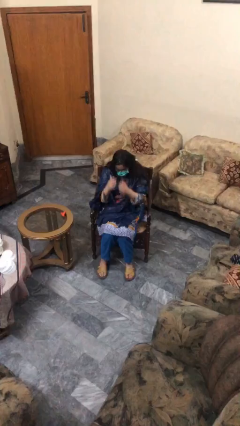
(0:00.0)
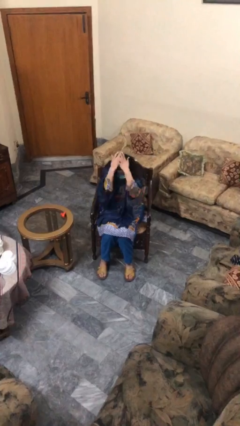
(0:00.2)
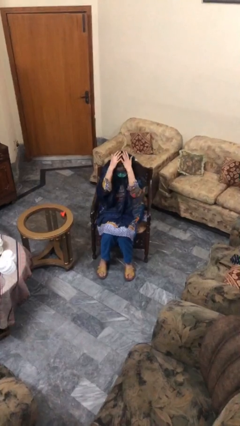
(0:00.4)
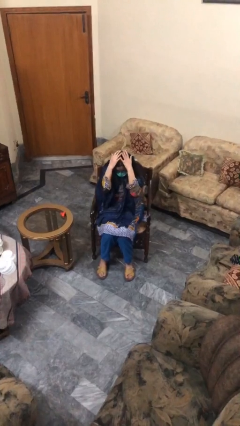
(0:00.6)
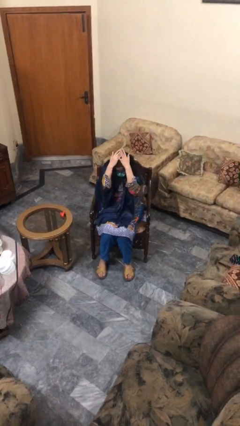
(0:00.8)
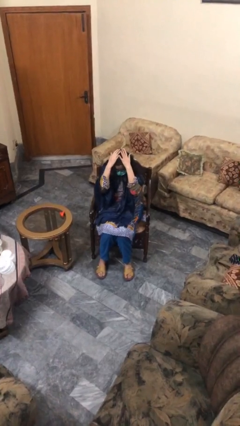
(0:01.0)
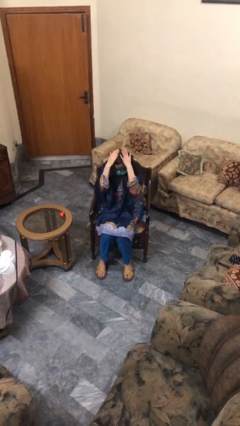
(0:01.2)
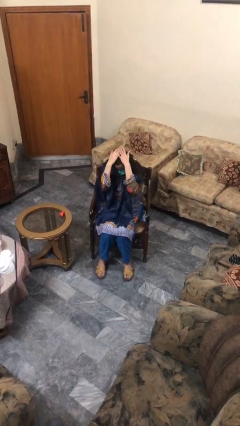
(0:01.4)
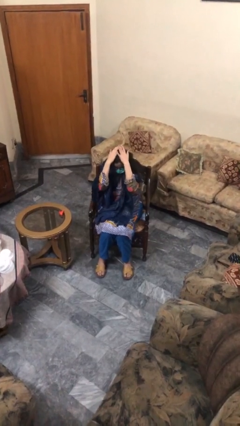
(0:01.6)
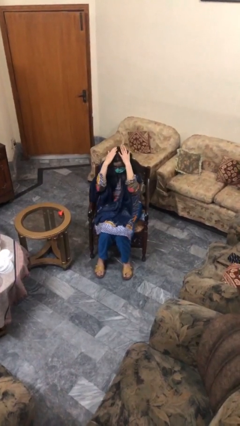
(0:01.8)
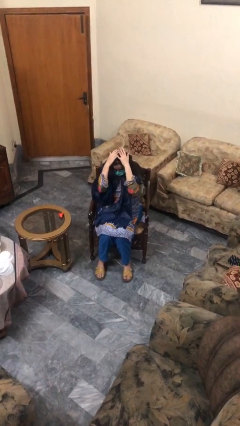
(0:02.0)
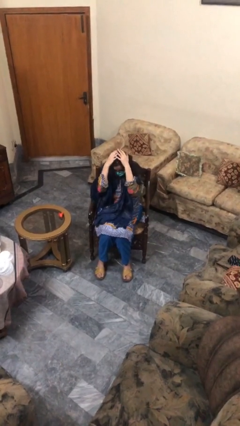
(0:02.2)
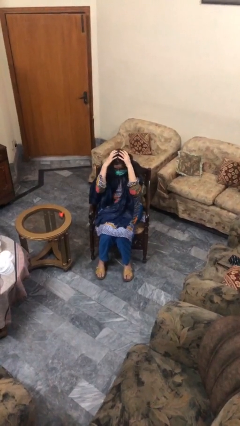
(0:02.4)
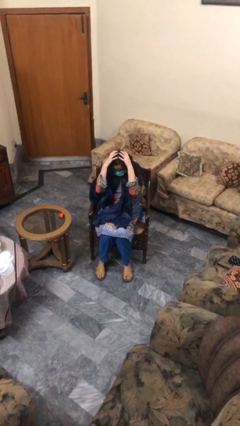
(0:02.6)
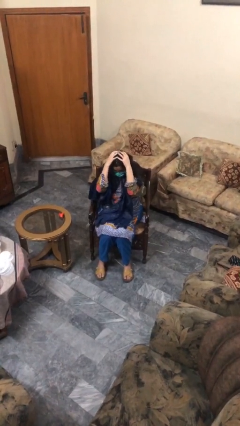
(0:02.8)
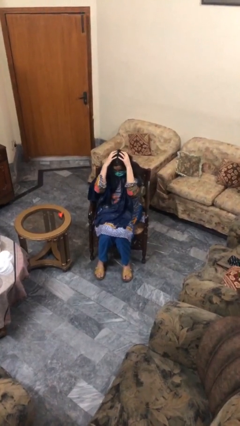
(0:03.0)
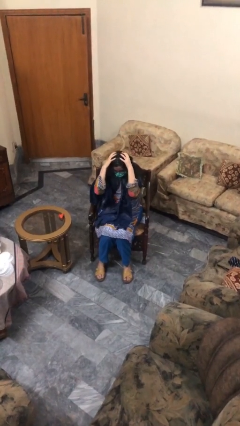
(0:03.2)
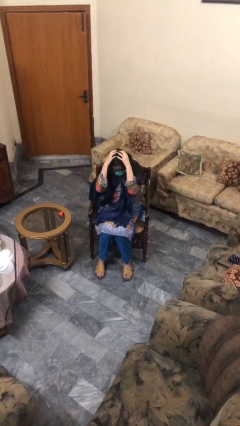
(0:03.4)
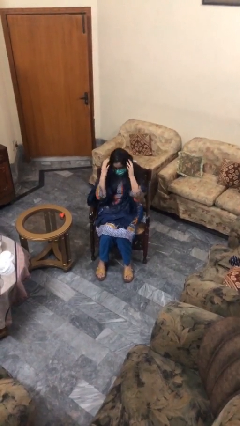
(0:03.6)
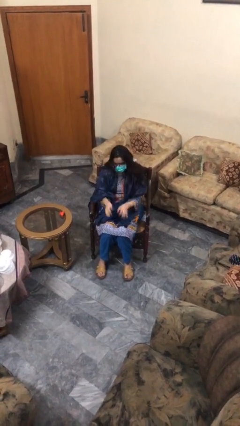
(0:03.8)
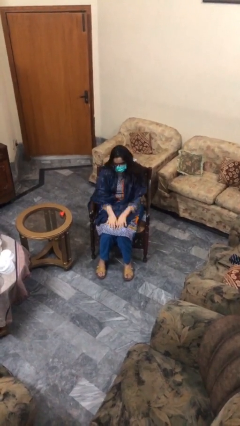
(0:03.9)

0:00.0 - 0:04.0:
person pats head

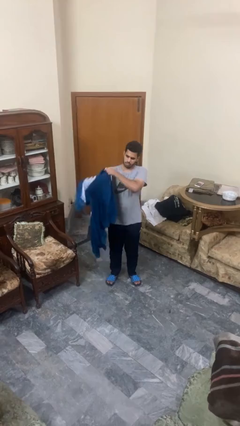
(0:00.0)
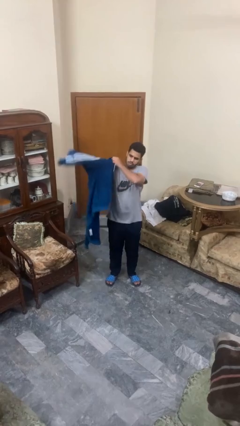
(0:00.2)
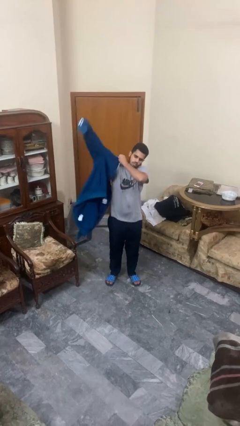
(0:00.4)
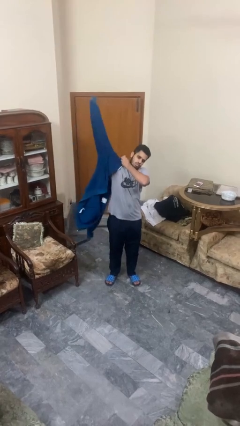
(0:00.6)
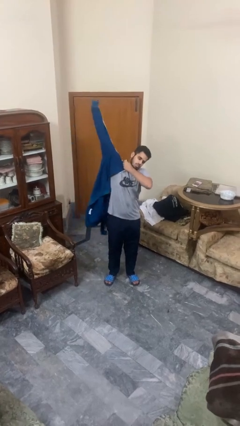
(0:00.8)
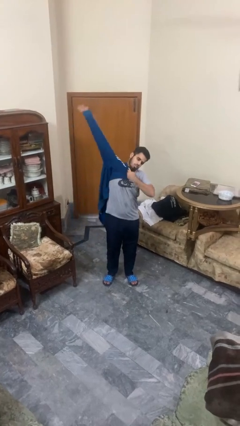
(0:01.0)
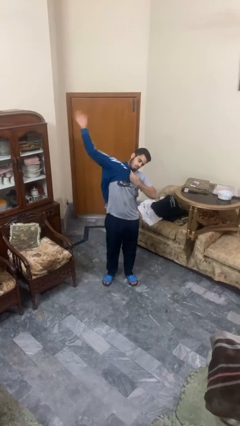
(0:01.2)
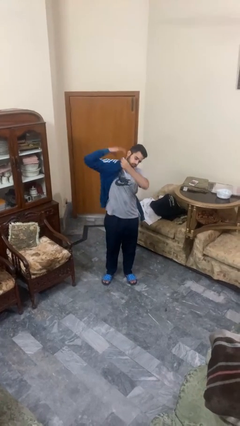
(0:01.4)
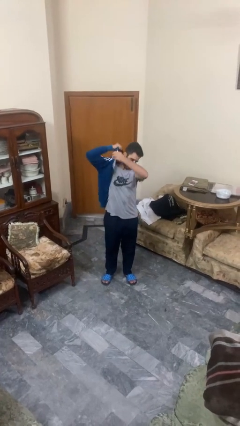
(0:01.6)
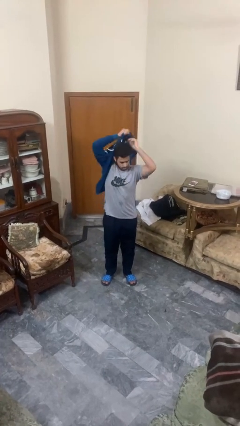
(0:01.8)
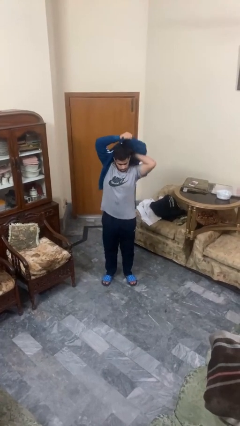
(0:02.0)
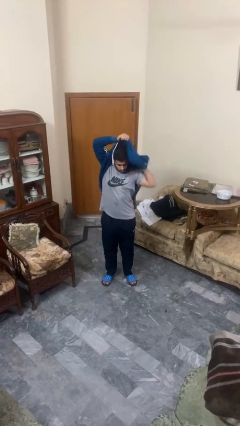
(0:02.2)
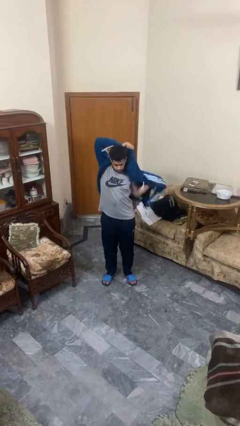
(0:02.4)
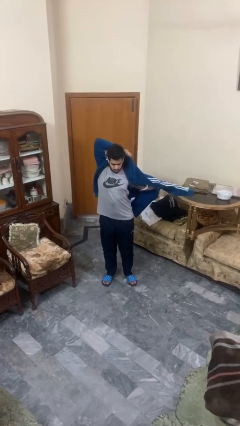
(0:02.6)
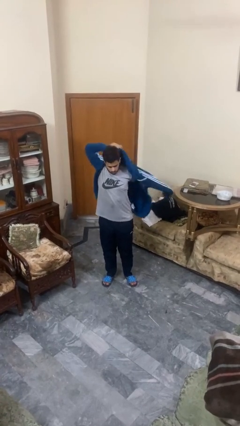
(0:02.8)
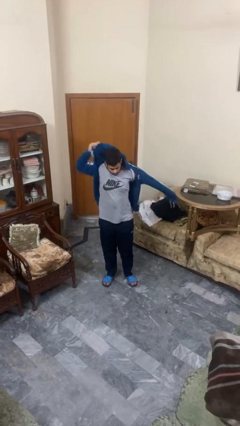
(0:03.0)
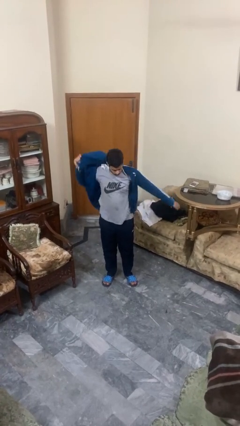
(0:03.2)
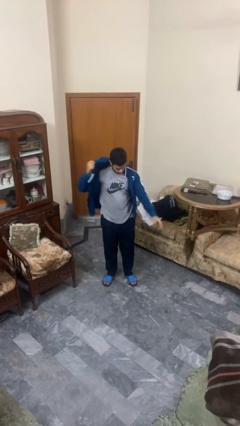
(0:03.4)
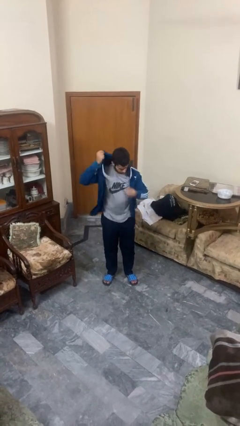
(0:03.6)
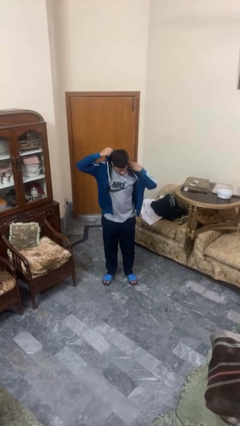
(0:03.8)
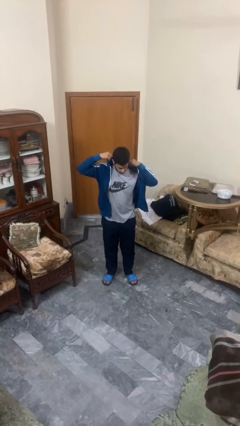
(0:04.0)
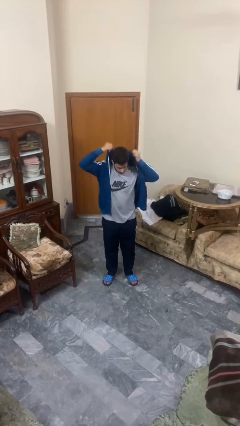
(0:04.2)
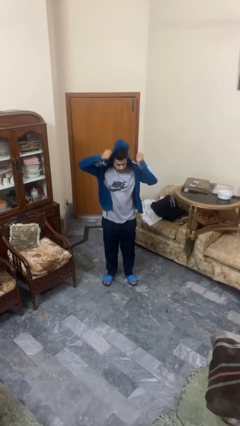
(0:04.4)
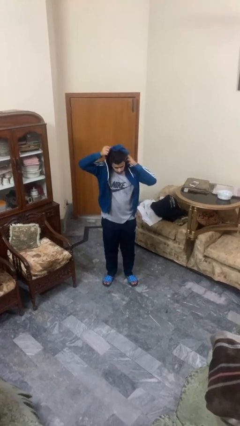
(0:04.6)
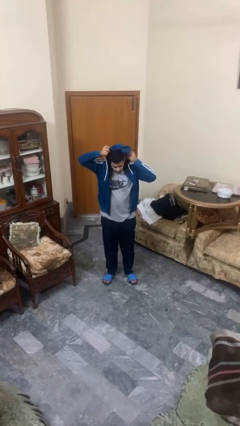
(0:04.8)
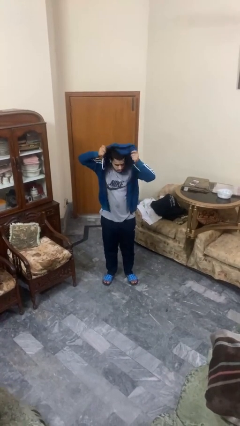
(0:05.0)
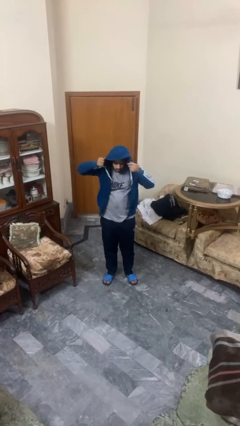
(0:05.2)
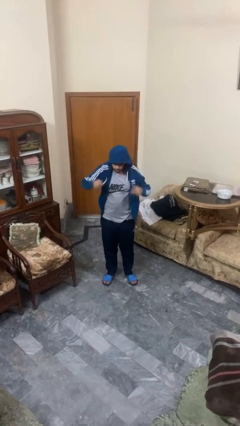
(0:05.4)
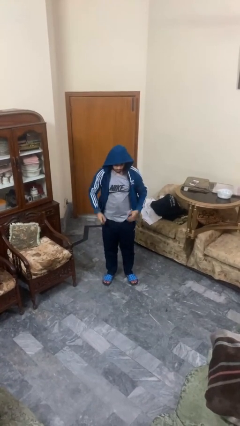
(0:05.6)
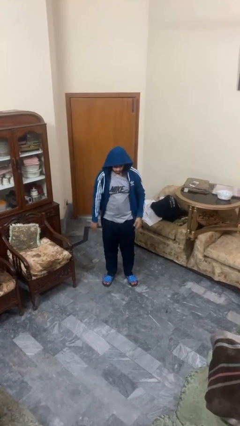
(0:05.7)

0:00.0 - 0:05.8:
person puts on hoodie

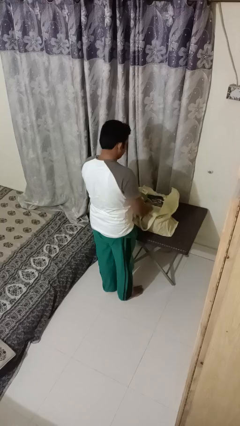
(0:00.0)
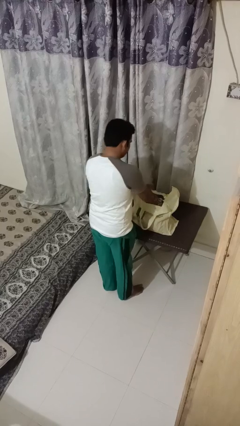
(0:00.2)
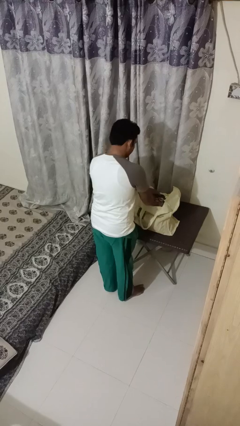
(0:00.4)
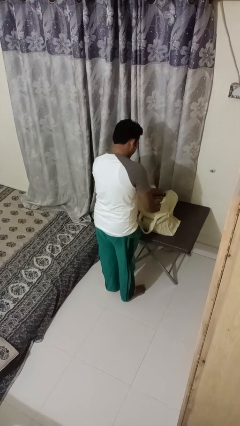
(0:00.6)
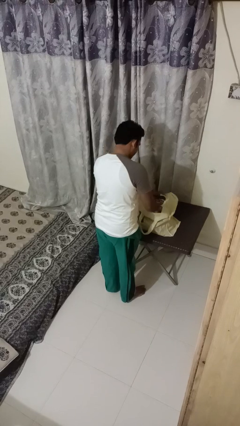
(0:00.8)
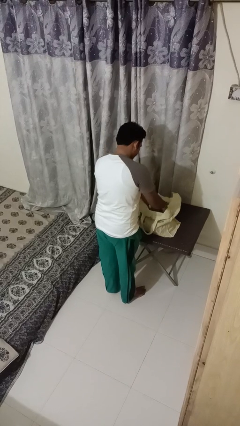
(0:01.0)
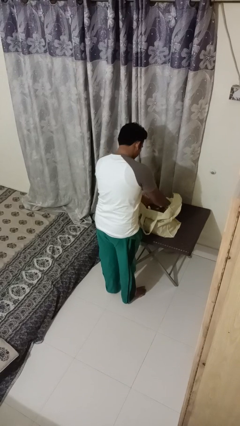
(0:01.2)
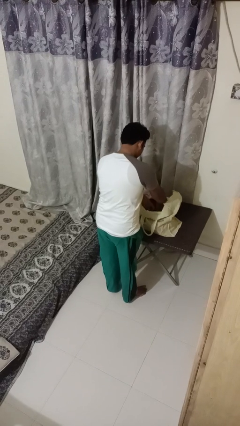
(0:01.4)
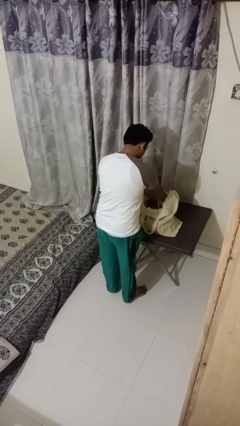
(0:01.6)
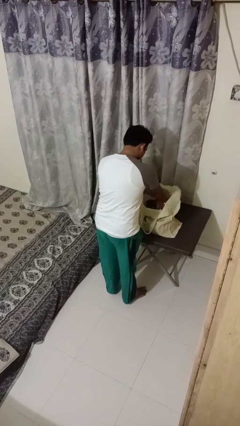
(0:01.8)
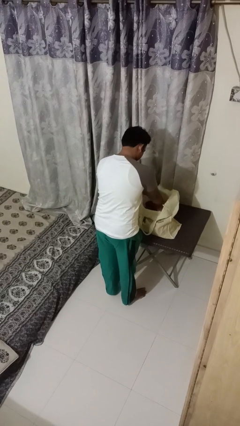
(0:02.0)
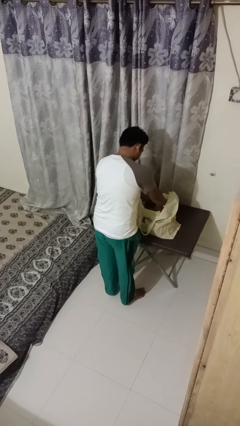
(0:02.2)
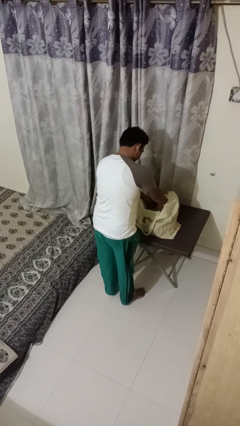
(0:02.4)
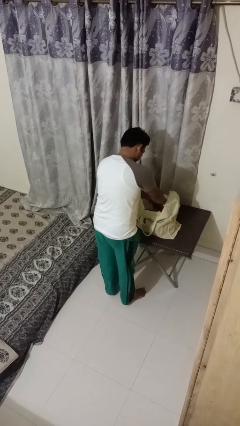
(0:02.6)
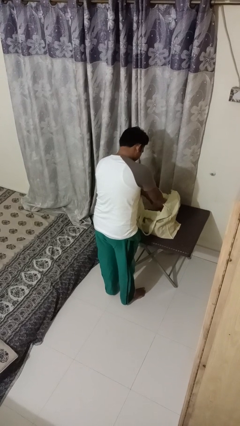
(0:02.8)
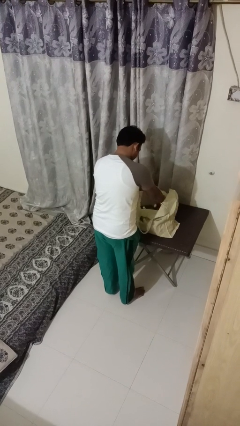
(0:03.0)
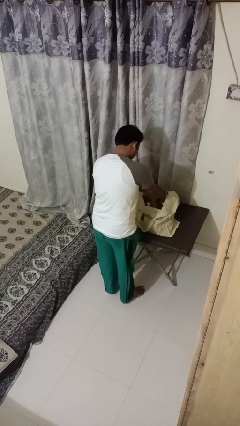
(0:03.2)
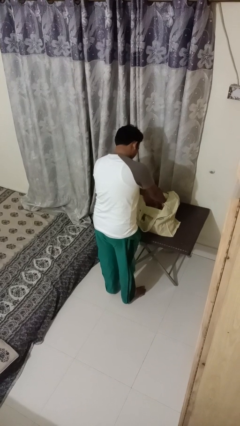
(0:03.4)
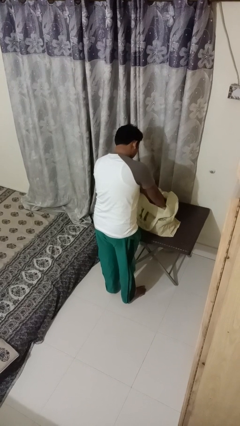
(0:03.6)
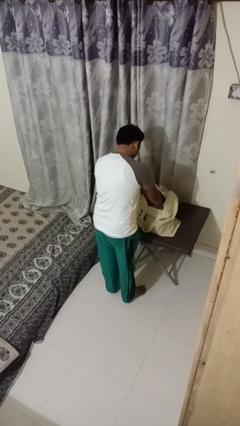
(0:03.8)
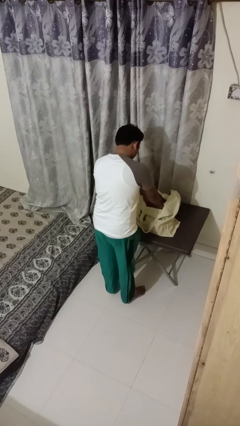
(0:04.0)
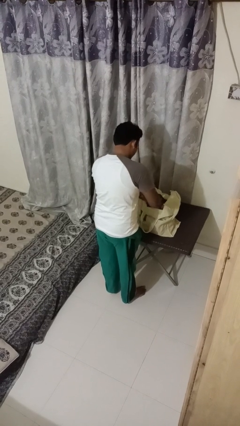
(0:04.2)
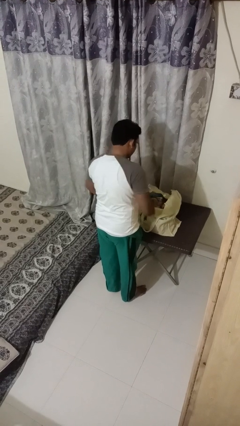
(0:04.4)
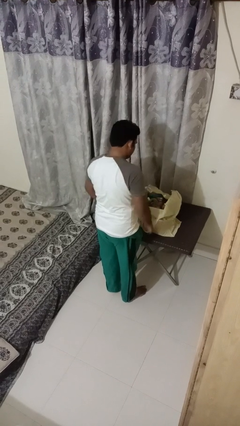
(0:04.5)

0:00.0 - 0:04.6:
person searches in bag

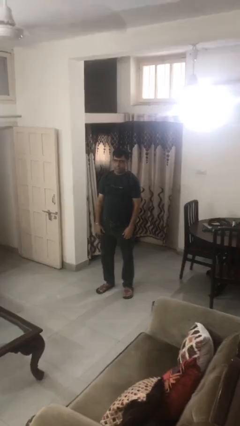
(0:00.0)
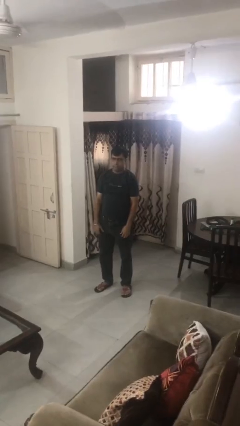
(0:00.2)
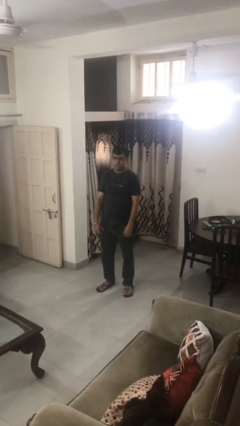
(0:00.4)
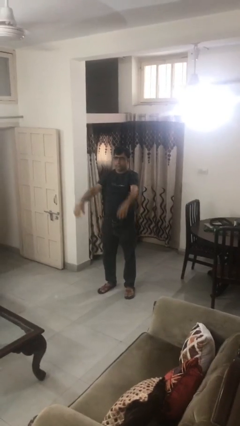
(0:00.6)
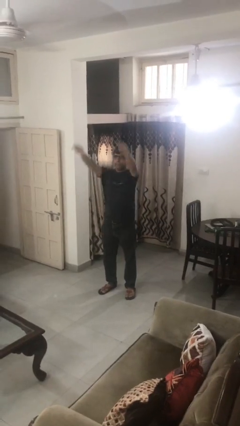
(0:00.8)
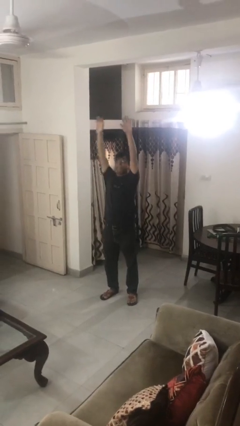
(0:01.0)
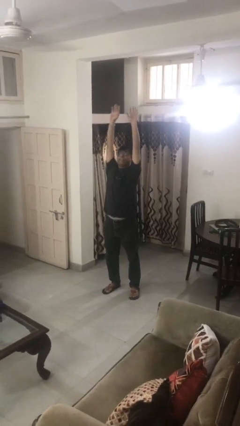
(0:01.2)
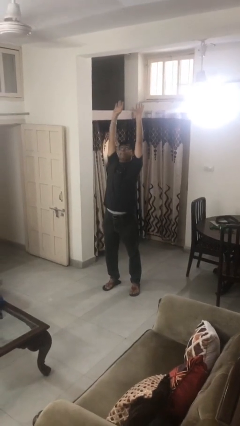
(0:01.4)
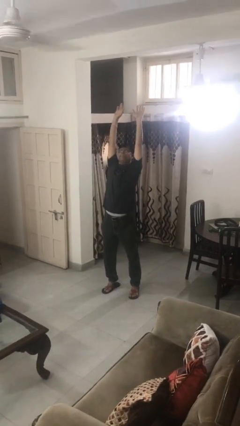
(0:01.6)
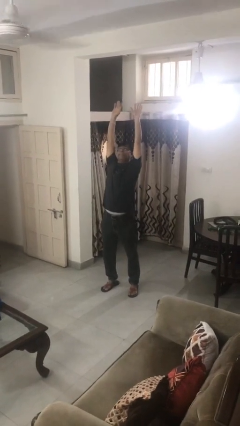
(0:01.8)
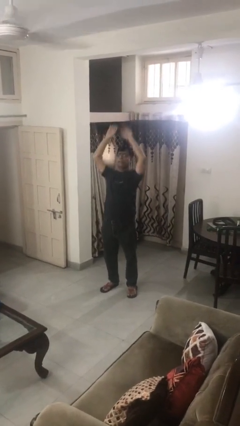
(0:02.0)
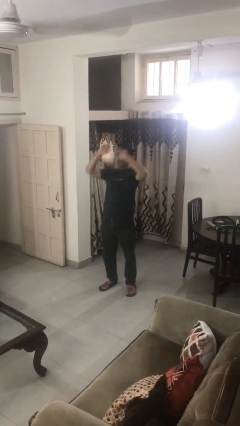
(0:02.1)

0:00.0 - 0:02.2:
person stretches arms over head

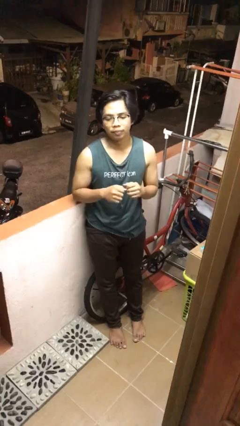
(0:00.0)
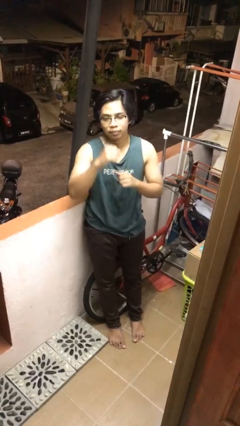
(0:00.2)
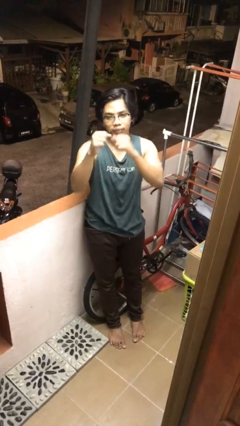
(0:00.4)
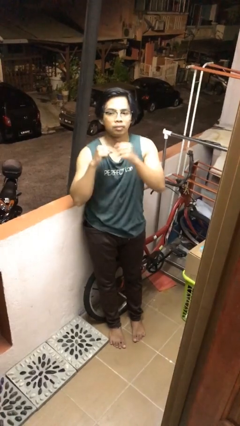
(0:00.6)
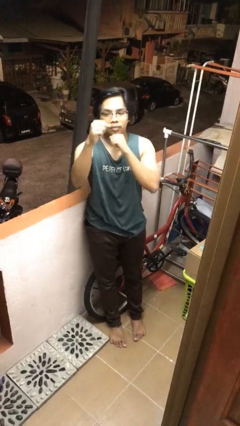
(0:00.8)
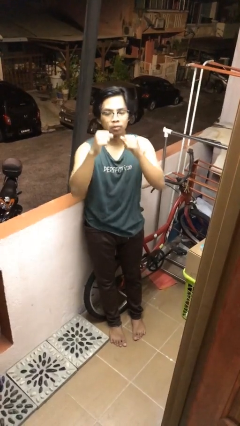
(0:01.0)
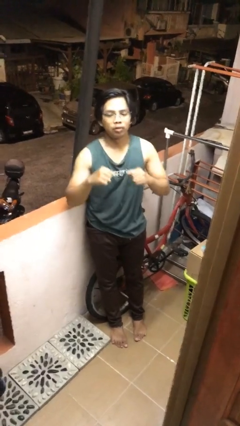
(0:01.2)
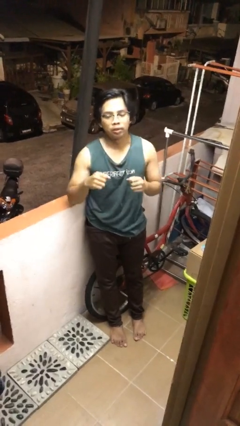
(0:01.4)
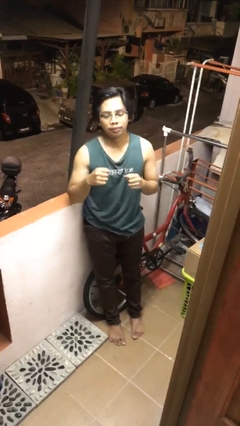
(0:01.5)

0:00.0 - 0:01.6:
person punches
